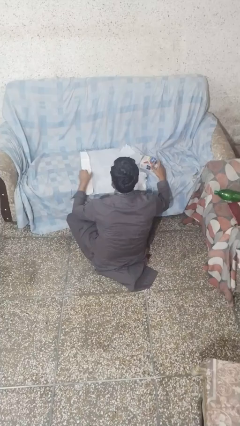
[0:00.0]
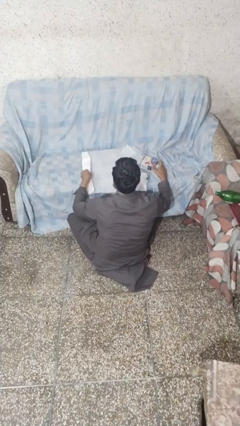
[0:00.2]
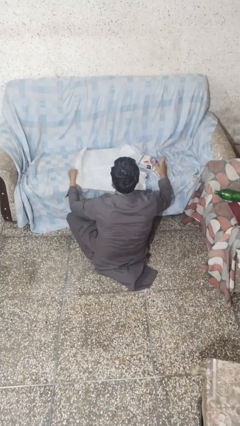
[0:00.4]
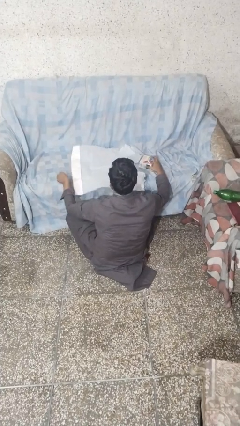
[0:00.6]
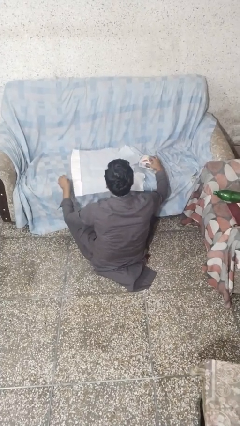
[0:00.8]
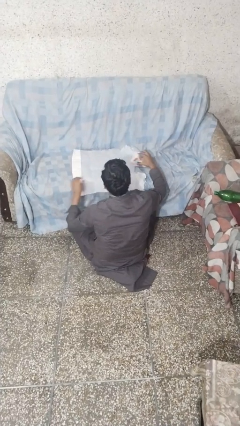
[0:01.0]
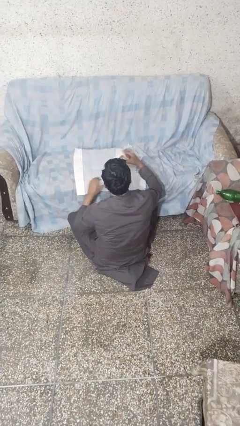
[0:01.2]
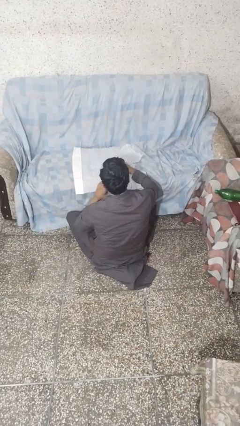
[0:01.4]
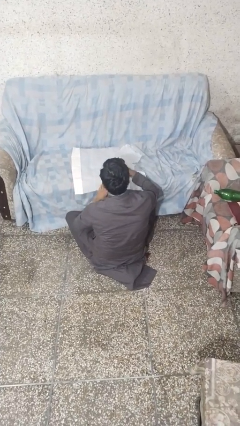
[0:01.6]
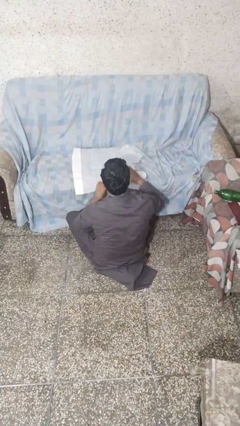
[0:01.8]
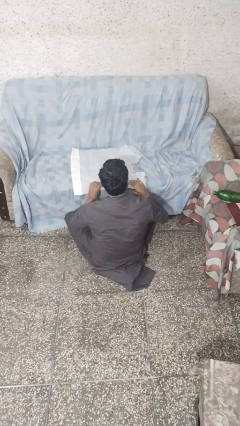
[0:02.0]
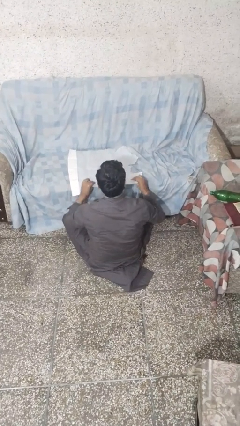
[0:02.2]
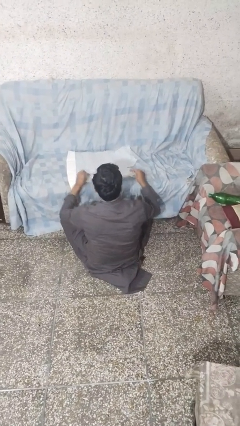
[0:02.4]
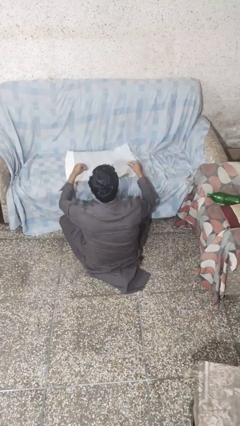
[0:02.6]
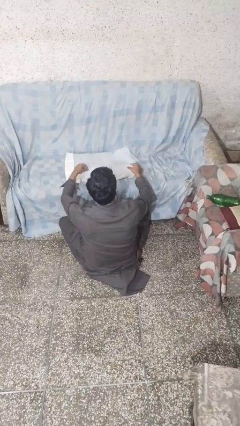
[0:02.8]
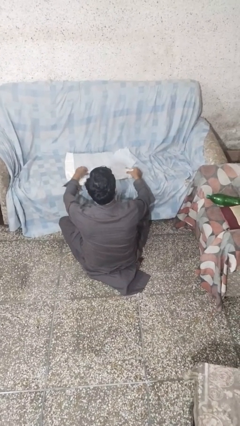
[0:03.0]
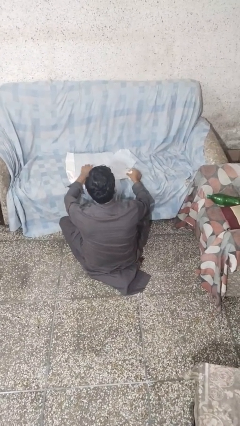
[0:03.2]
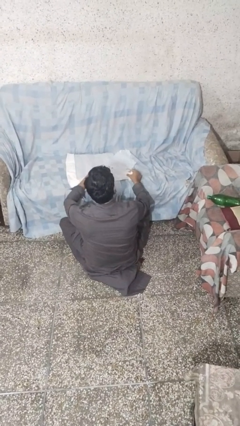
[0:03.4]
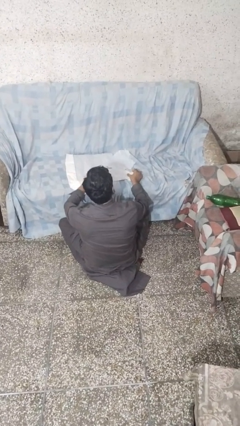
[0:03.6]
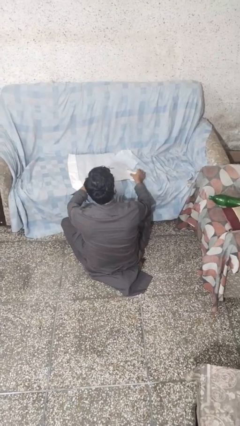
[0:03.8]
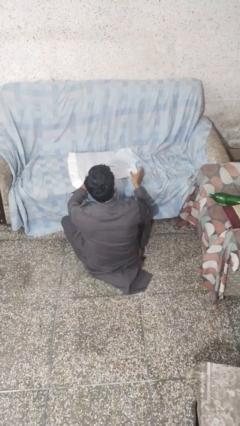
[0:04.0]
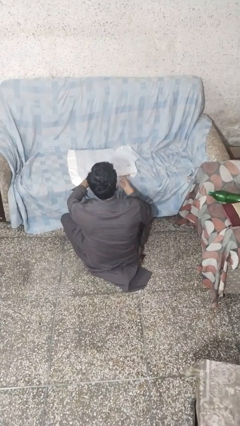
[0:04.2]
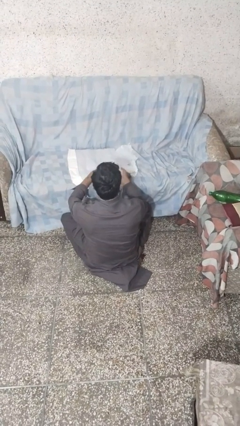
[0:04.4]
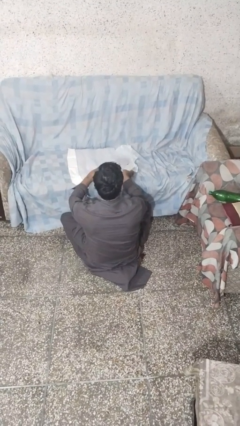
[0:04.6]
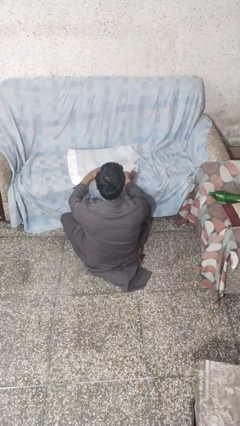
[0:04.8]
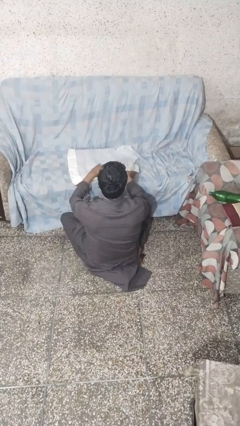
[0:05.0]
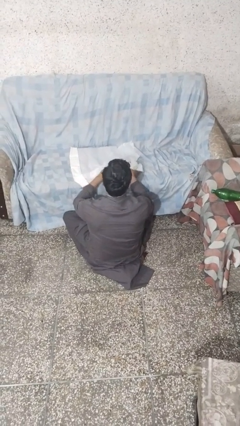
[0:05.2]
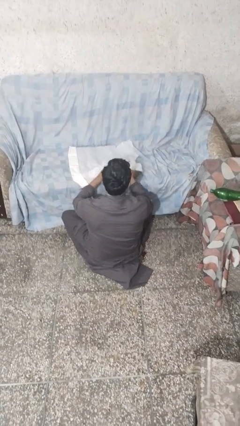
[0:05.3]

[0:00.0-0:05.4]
person wraps box

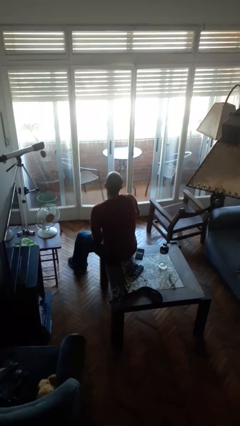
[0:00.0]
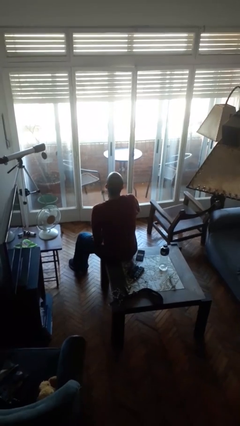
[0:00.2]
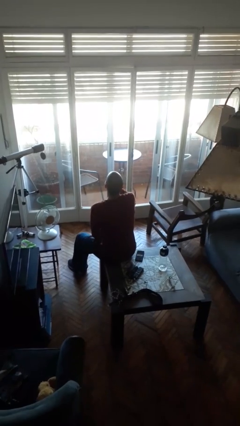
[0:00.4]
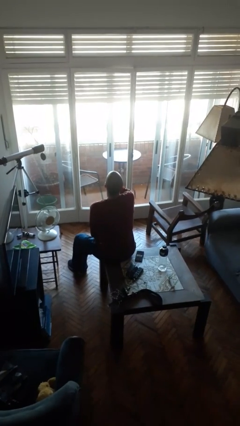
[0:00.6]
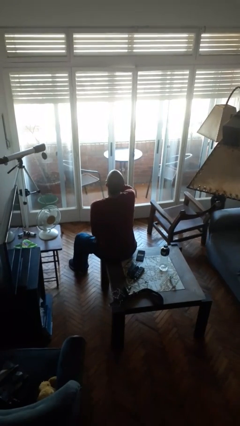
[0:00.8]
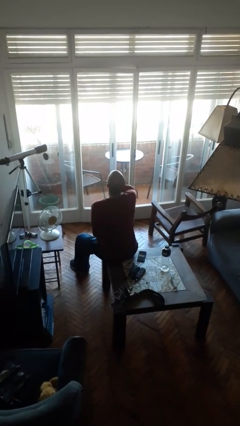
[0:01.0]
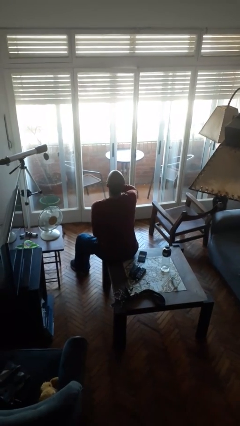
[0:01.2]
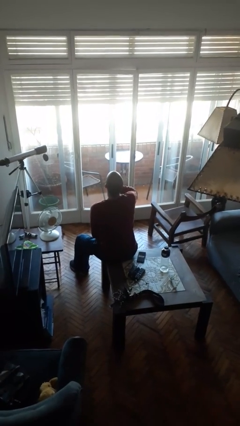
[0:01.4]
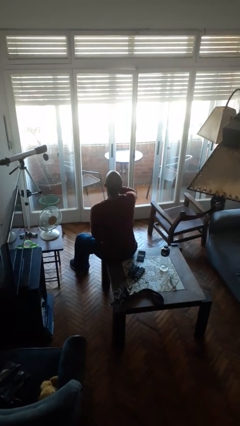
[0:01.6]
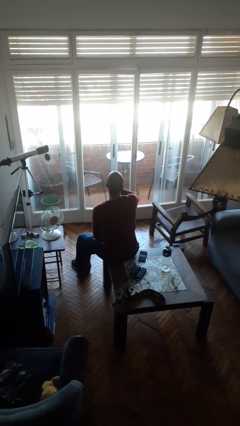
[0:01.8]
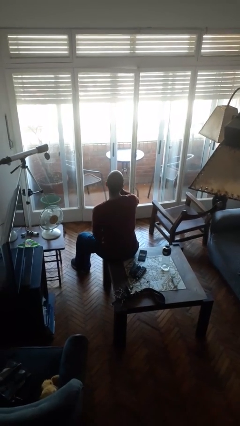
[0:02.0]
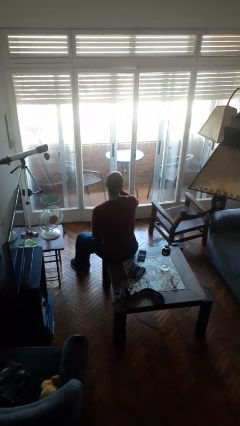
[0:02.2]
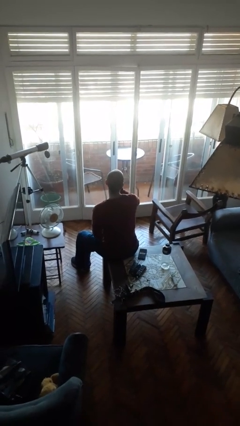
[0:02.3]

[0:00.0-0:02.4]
person yawns

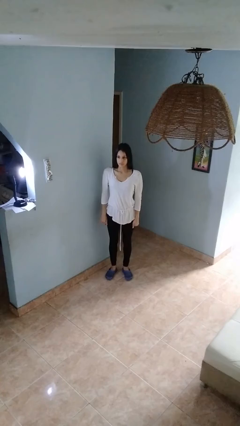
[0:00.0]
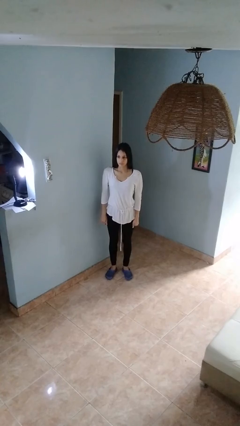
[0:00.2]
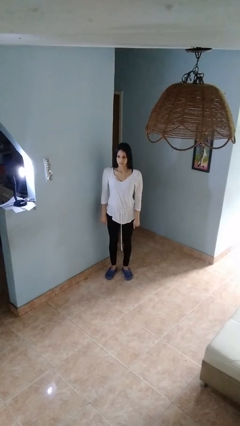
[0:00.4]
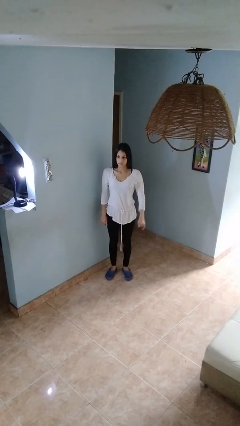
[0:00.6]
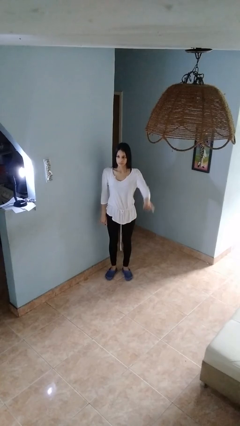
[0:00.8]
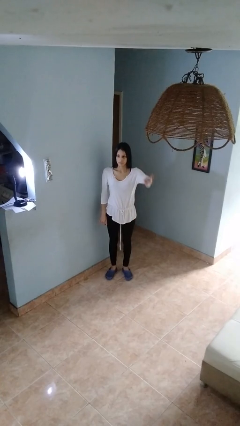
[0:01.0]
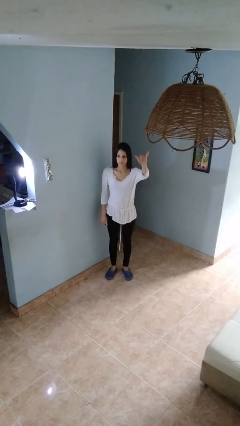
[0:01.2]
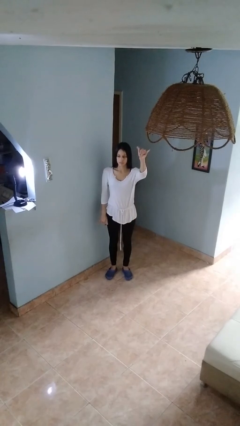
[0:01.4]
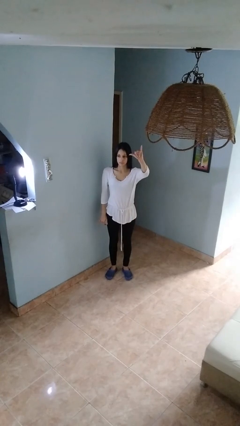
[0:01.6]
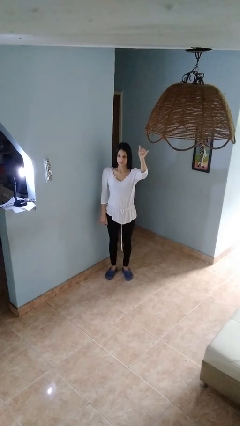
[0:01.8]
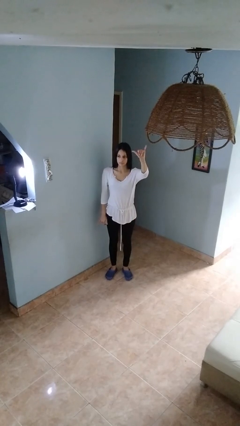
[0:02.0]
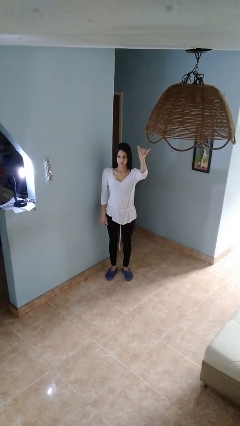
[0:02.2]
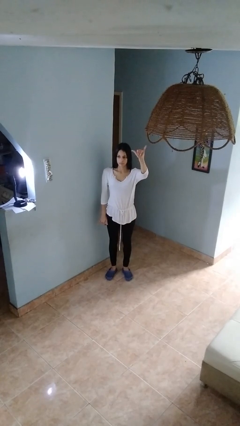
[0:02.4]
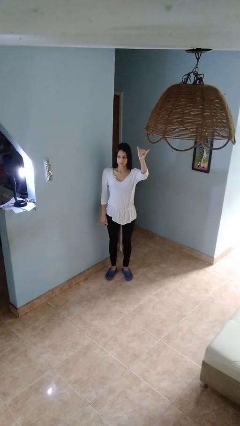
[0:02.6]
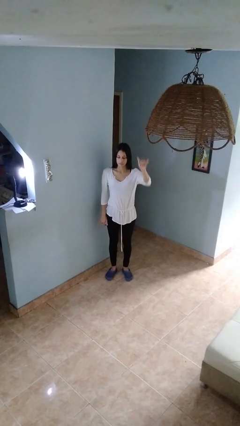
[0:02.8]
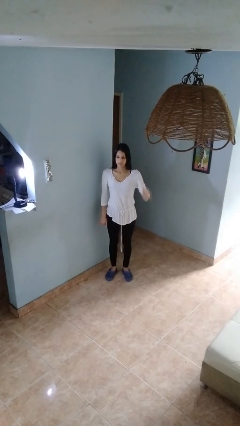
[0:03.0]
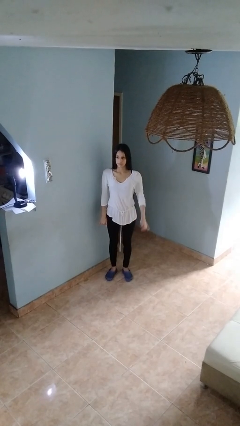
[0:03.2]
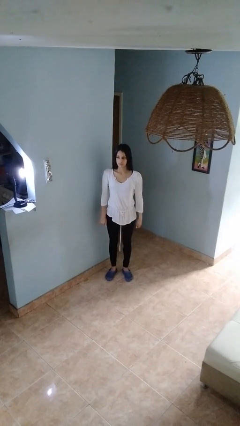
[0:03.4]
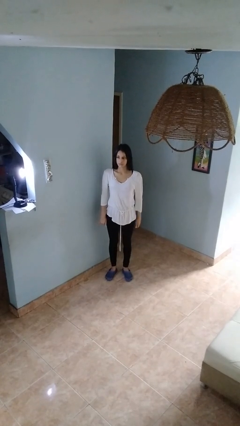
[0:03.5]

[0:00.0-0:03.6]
person gestures hang loose

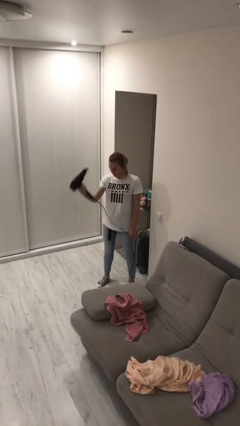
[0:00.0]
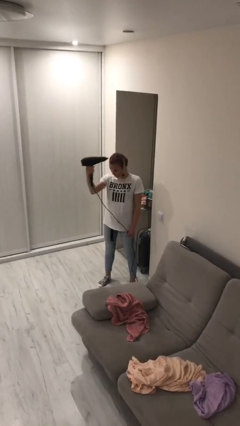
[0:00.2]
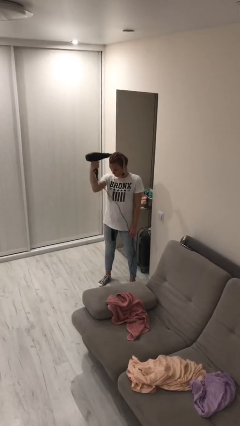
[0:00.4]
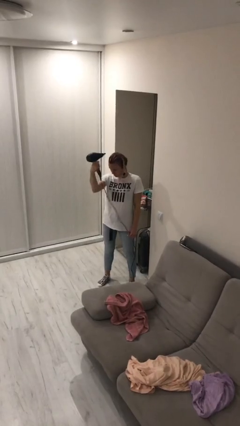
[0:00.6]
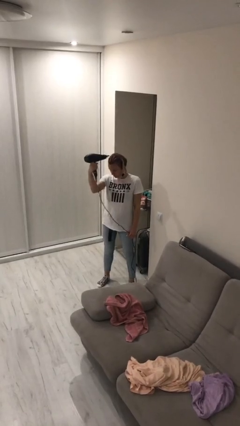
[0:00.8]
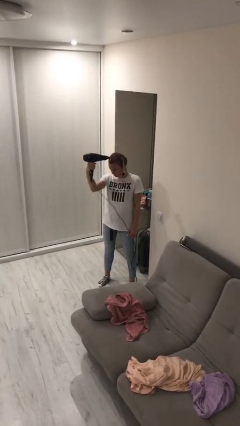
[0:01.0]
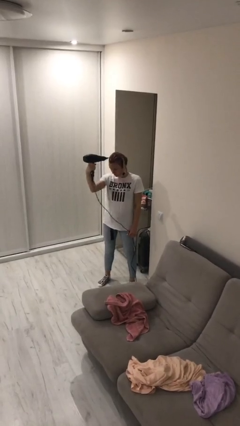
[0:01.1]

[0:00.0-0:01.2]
person dries hair with hairdryer

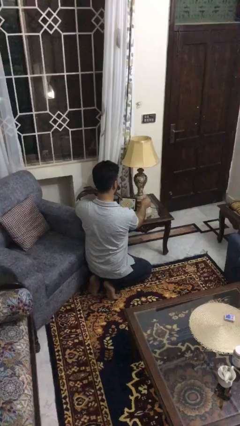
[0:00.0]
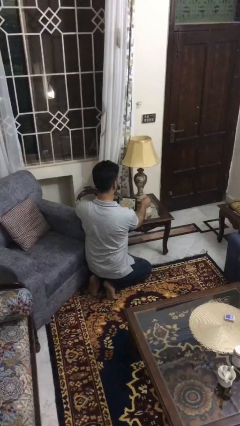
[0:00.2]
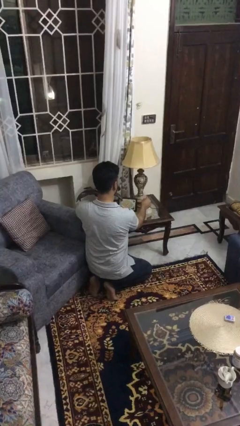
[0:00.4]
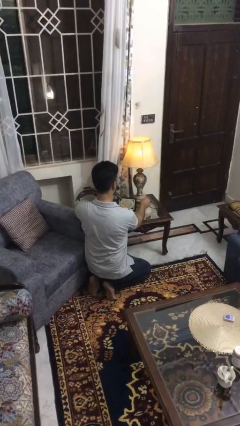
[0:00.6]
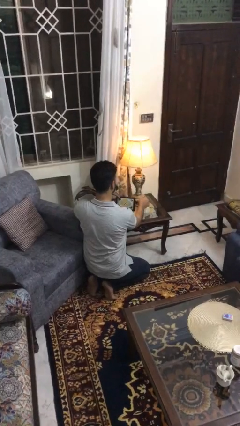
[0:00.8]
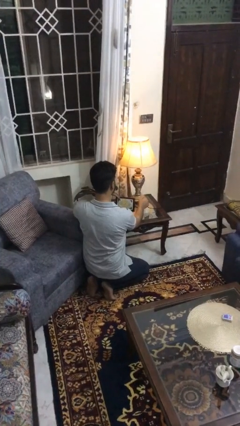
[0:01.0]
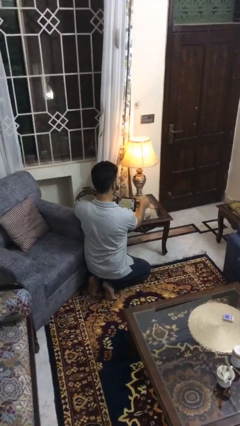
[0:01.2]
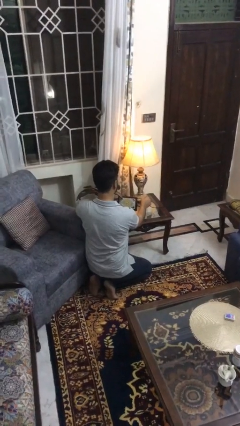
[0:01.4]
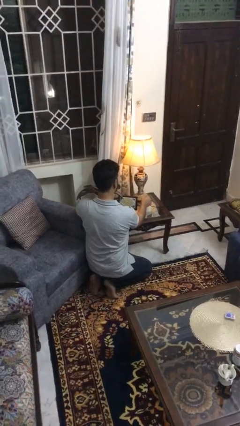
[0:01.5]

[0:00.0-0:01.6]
person turns on lamp

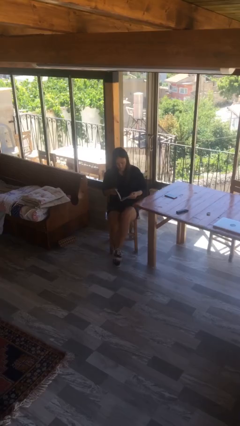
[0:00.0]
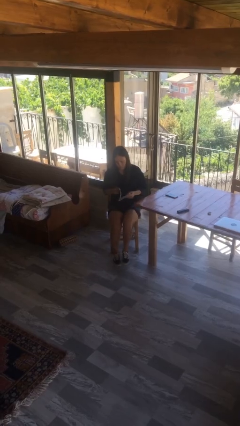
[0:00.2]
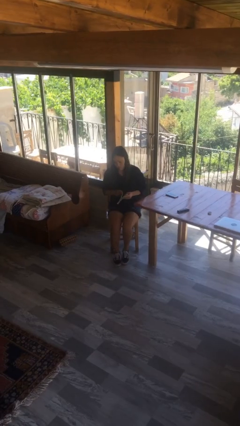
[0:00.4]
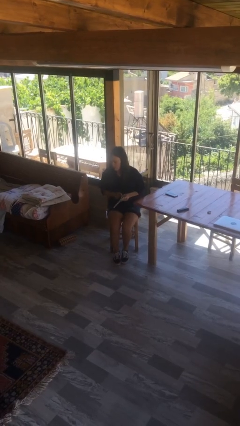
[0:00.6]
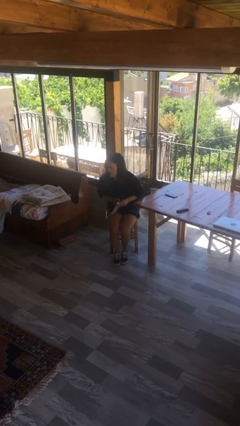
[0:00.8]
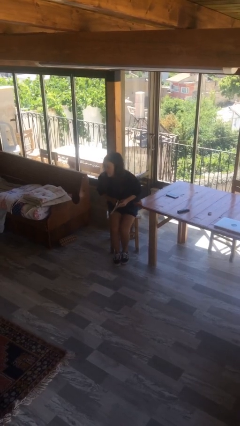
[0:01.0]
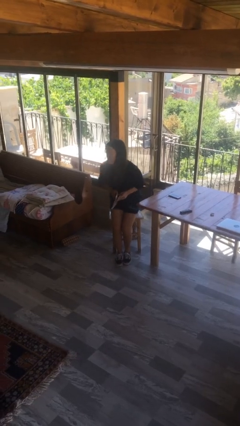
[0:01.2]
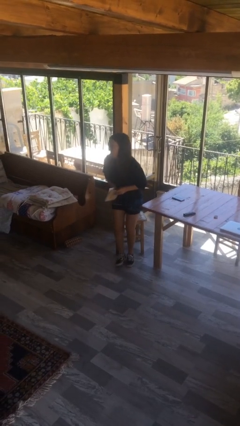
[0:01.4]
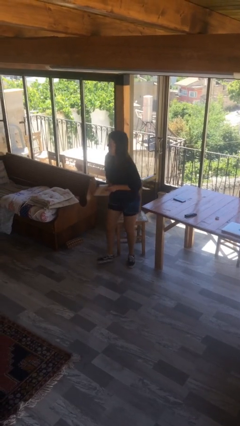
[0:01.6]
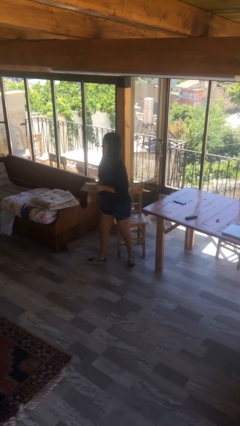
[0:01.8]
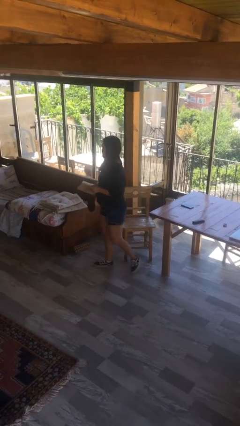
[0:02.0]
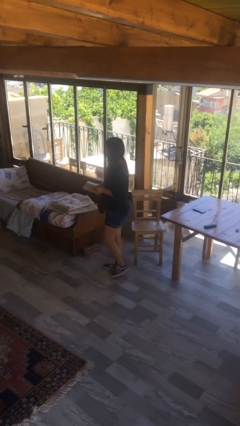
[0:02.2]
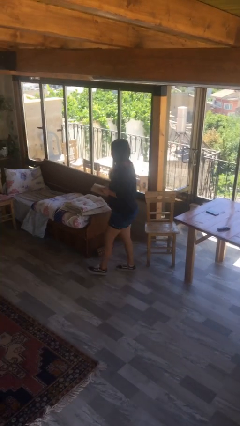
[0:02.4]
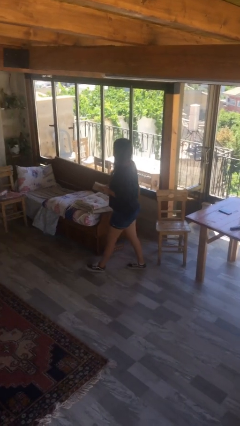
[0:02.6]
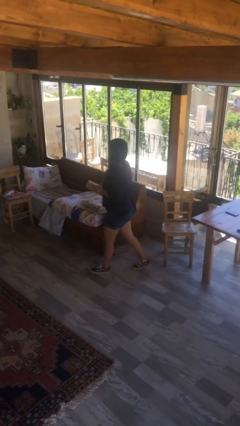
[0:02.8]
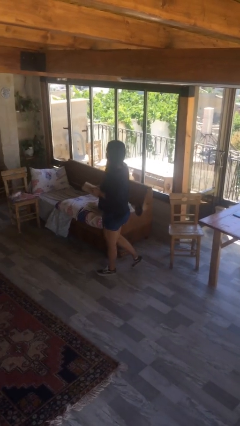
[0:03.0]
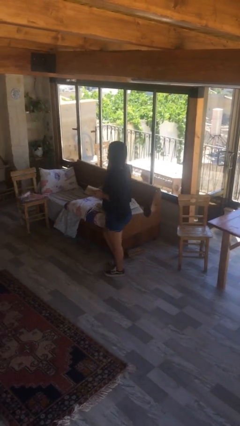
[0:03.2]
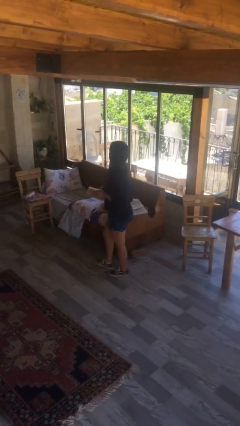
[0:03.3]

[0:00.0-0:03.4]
person stands up

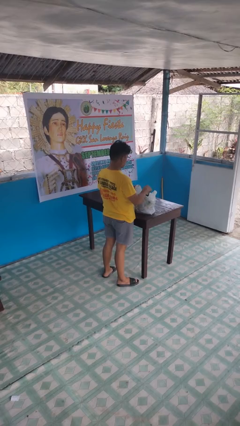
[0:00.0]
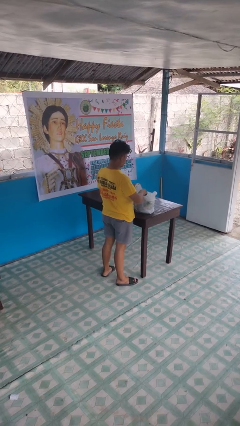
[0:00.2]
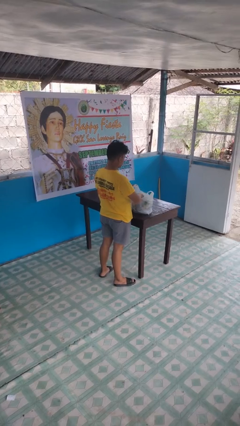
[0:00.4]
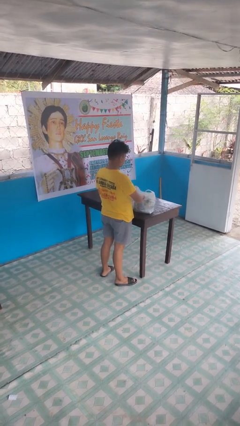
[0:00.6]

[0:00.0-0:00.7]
person puts object into bag
